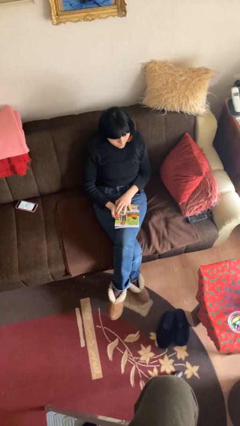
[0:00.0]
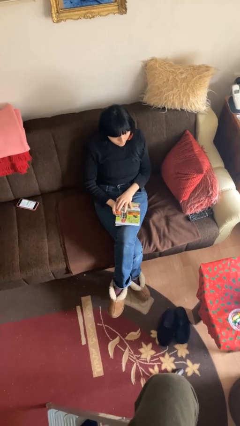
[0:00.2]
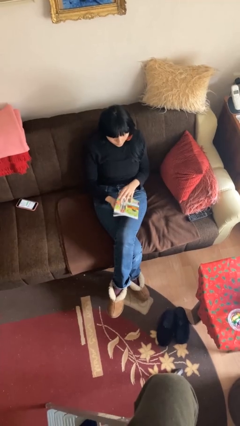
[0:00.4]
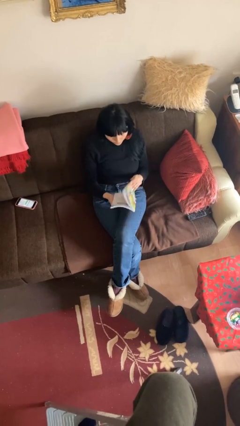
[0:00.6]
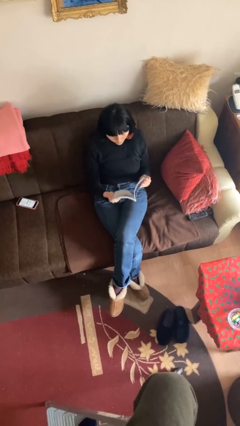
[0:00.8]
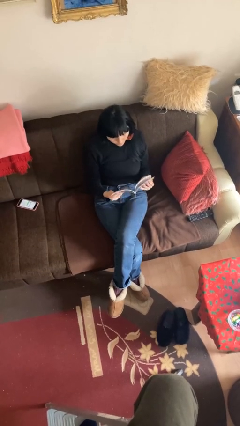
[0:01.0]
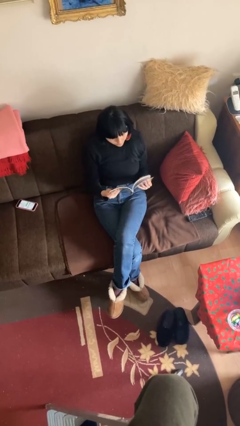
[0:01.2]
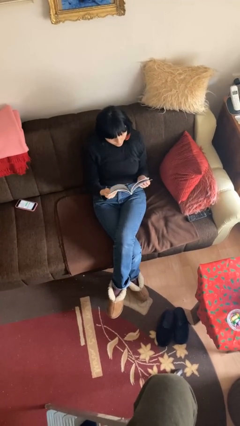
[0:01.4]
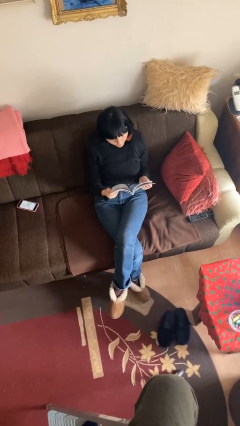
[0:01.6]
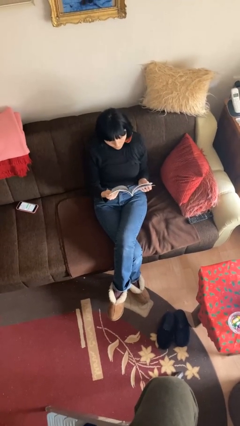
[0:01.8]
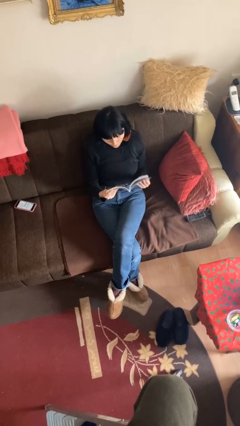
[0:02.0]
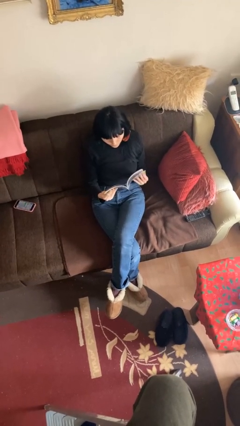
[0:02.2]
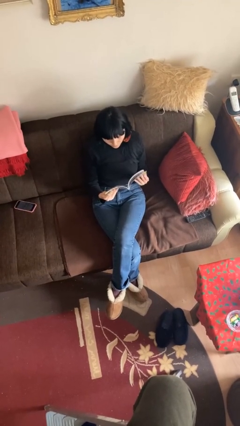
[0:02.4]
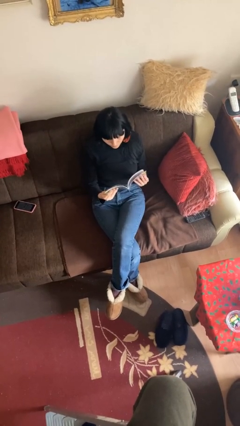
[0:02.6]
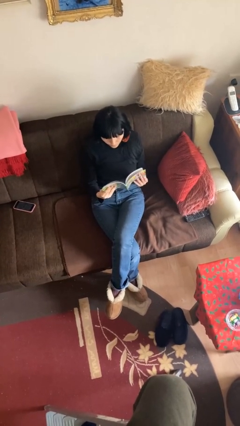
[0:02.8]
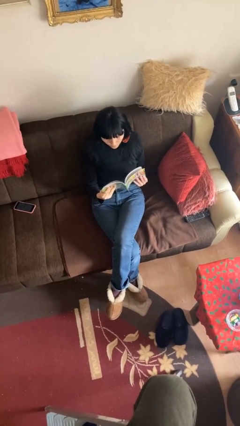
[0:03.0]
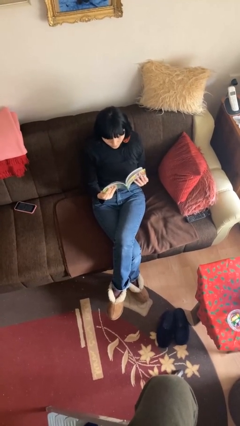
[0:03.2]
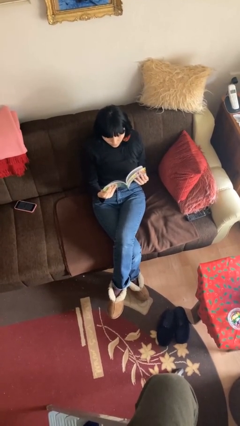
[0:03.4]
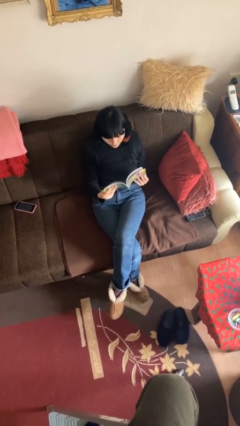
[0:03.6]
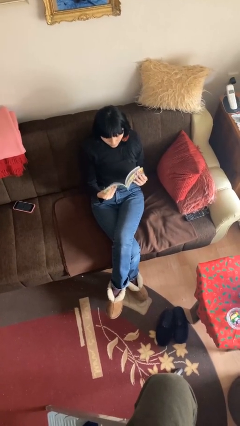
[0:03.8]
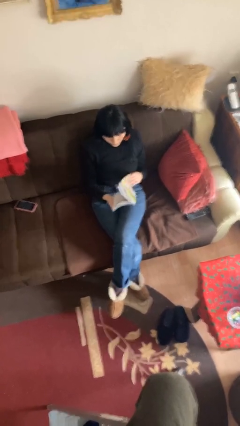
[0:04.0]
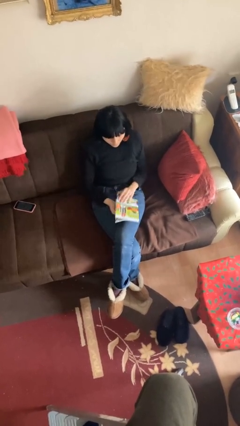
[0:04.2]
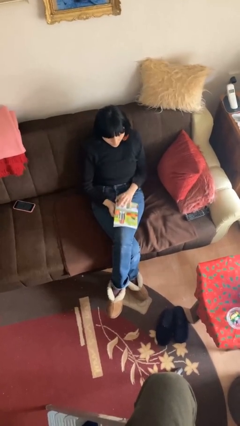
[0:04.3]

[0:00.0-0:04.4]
person reads document

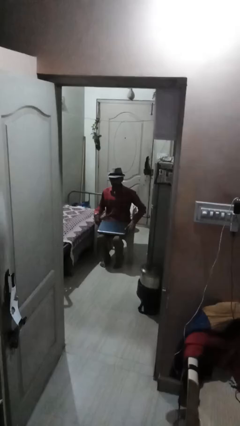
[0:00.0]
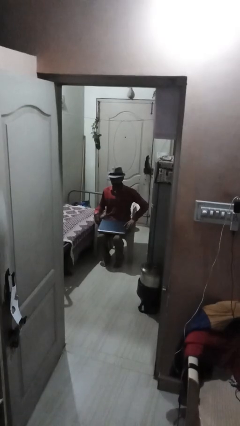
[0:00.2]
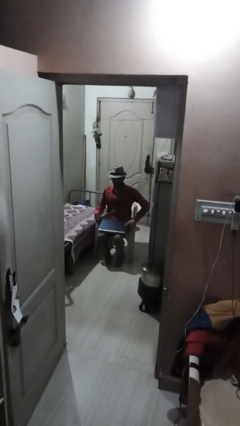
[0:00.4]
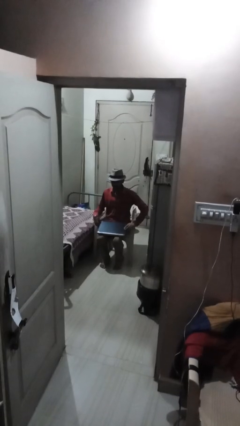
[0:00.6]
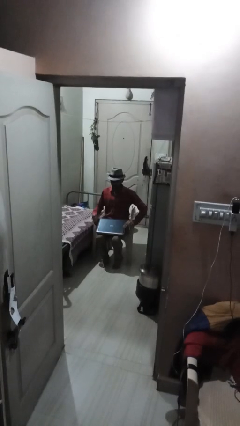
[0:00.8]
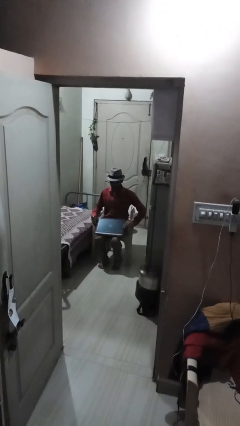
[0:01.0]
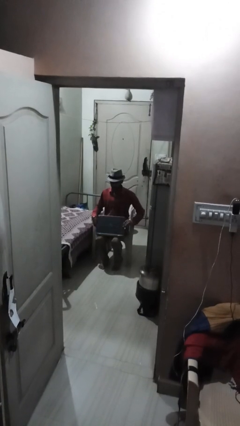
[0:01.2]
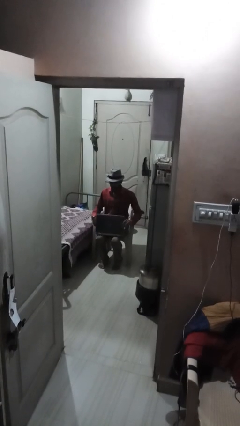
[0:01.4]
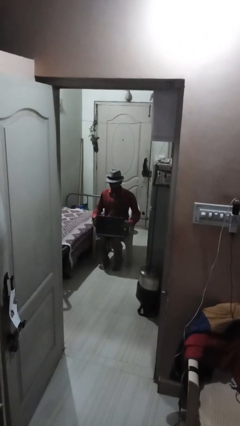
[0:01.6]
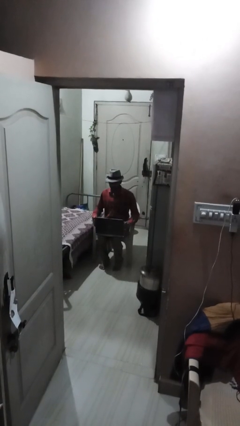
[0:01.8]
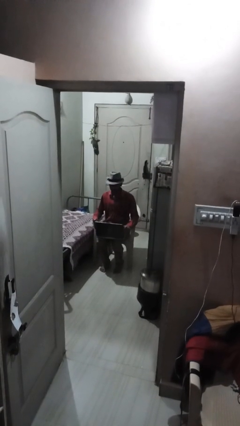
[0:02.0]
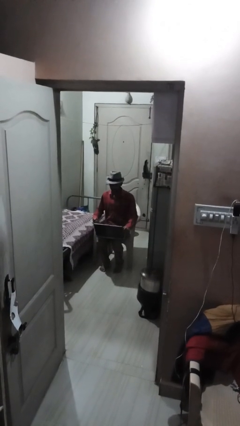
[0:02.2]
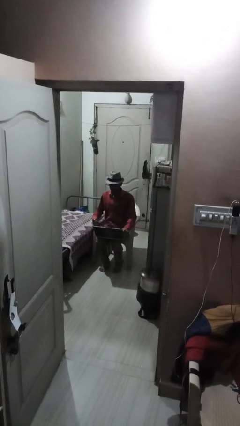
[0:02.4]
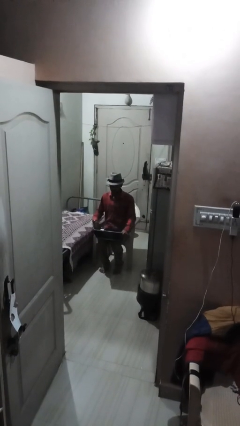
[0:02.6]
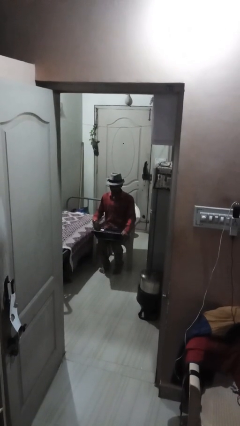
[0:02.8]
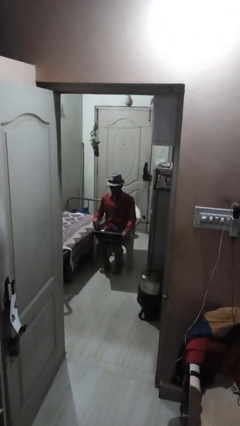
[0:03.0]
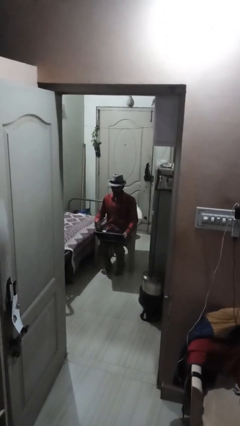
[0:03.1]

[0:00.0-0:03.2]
person opens laptop

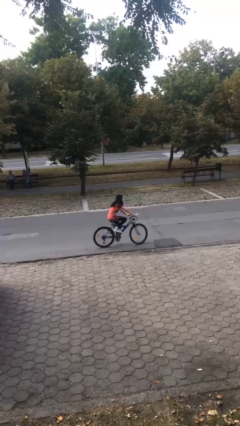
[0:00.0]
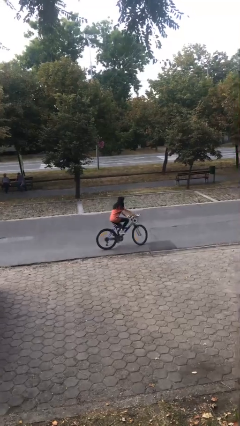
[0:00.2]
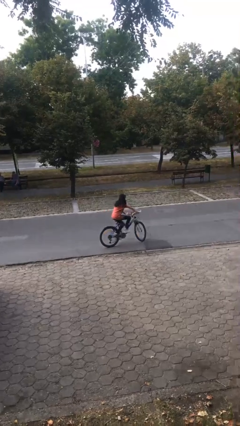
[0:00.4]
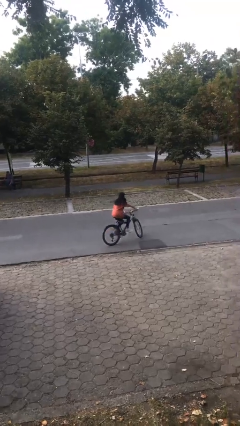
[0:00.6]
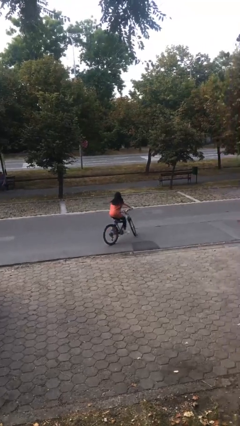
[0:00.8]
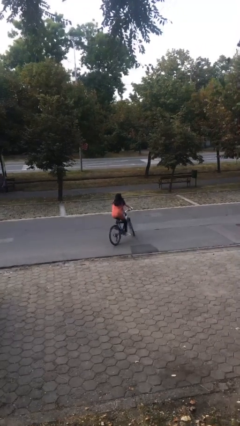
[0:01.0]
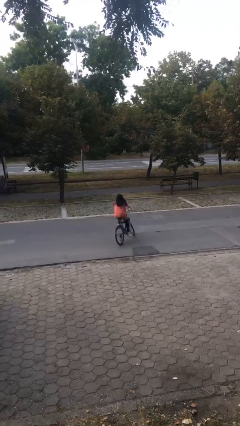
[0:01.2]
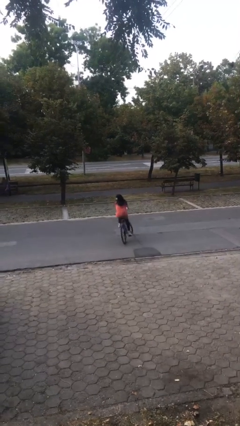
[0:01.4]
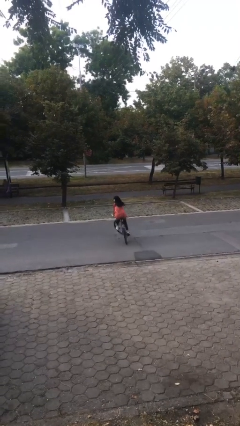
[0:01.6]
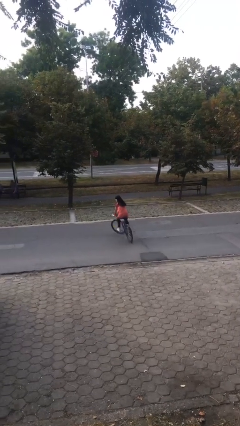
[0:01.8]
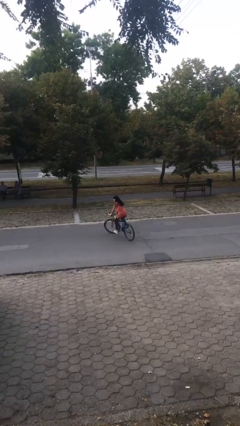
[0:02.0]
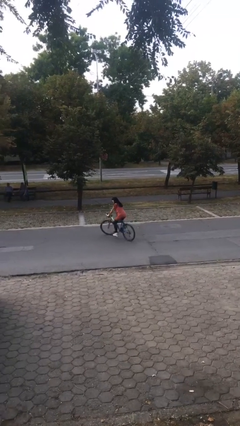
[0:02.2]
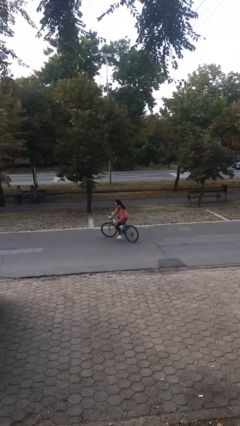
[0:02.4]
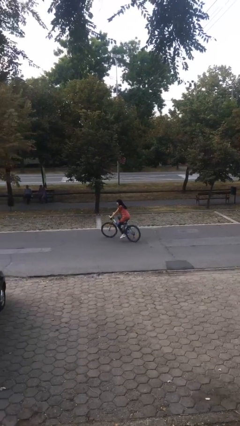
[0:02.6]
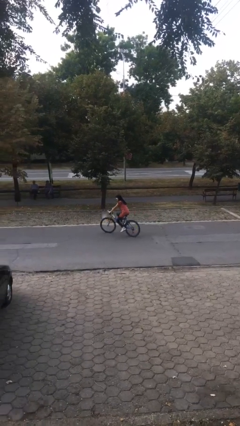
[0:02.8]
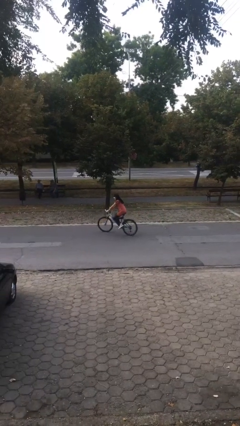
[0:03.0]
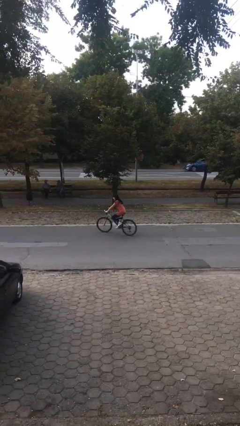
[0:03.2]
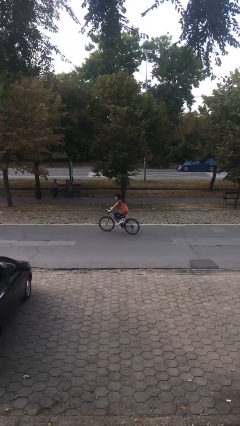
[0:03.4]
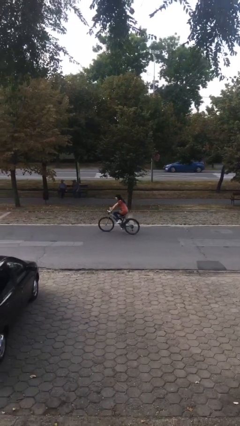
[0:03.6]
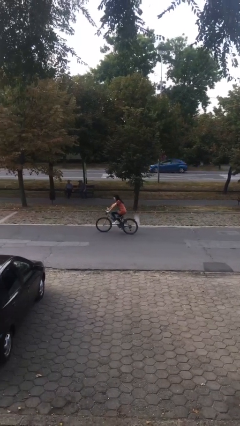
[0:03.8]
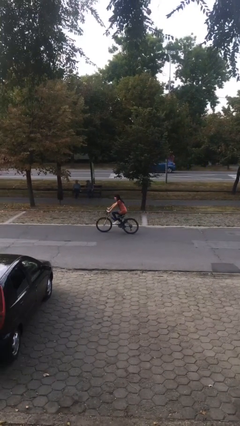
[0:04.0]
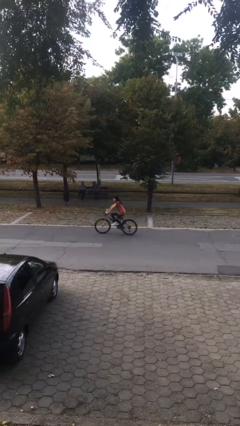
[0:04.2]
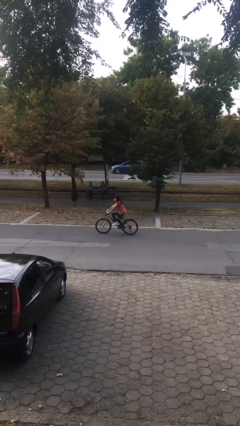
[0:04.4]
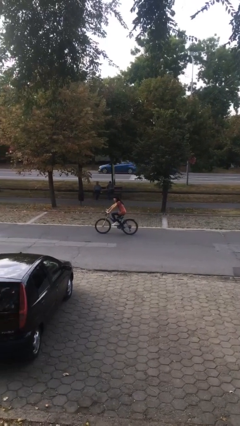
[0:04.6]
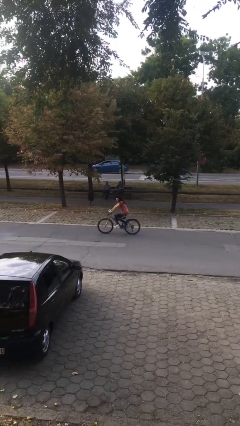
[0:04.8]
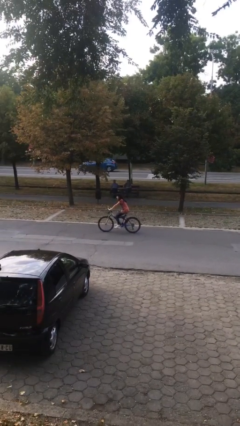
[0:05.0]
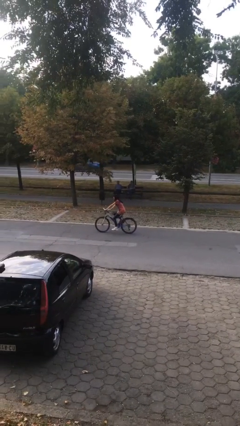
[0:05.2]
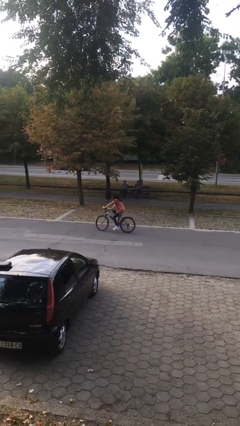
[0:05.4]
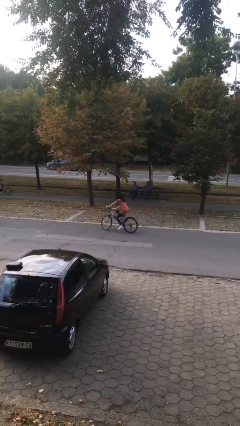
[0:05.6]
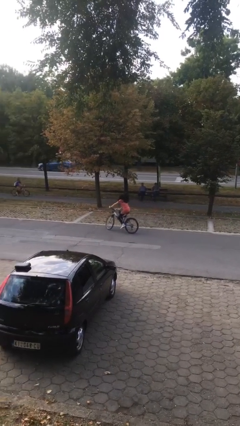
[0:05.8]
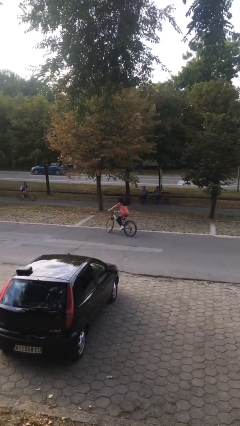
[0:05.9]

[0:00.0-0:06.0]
person rides bicycle

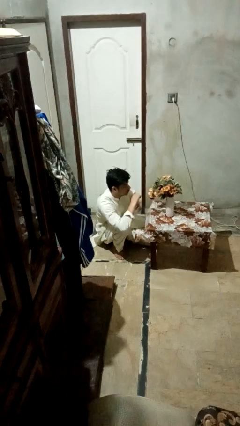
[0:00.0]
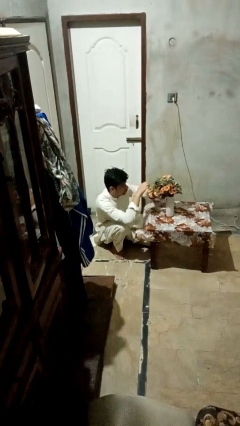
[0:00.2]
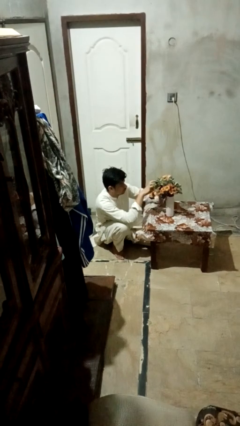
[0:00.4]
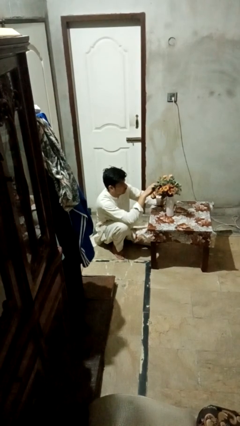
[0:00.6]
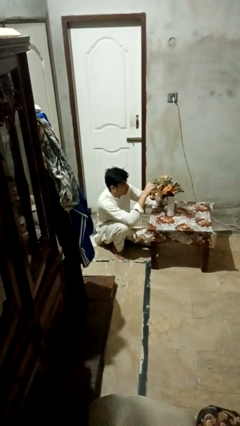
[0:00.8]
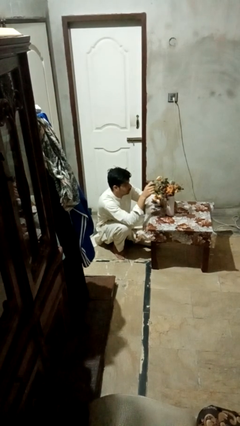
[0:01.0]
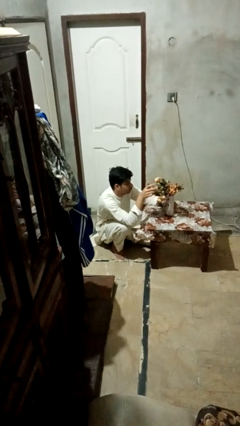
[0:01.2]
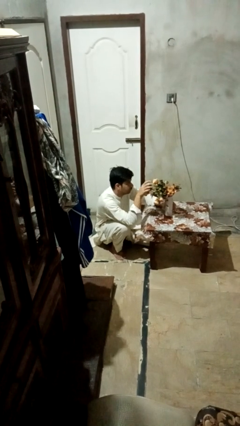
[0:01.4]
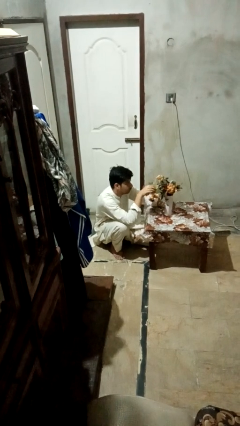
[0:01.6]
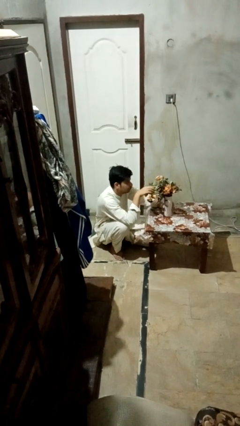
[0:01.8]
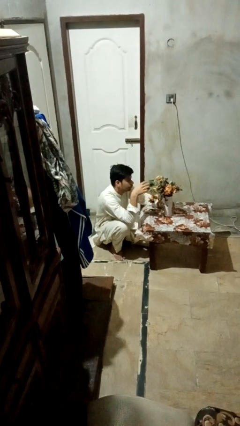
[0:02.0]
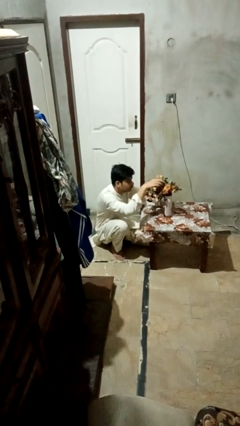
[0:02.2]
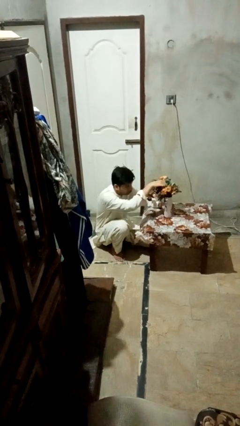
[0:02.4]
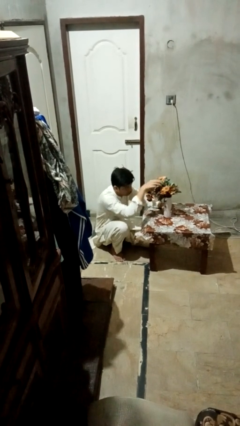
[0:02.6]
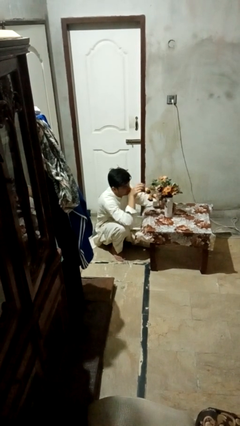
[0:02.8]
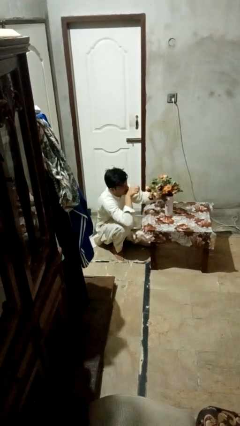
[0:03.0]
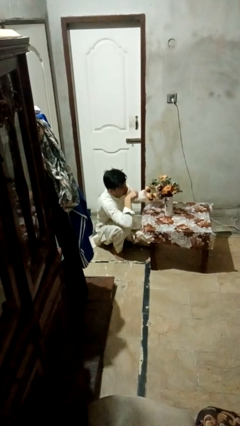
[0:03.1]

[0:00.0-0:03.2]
person arranges flowers in vase

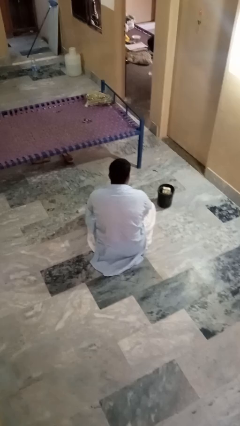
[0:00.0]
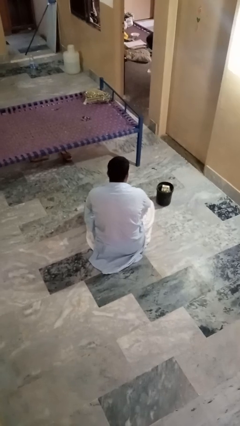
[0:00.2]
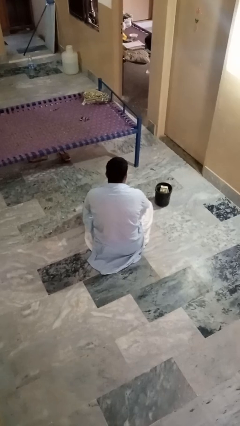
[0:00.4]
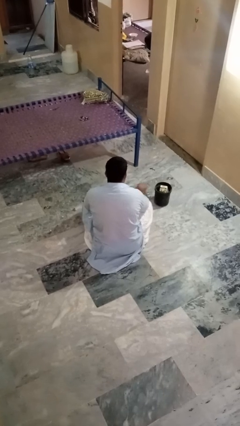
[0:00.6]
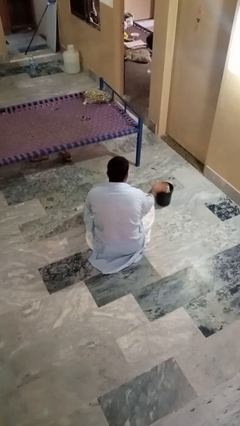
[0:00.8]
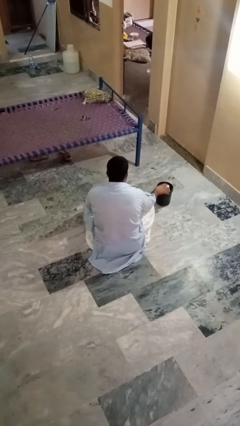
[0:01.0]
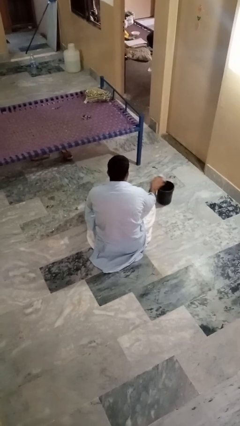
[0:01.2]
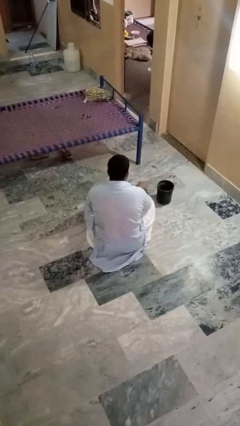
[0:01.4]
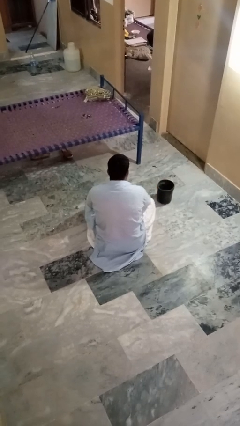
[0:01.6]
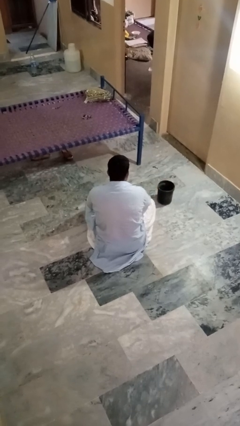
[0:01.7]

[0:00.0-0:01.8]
person takes object from basket
